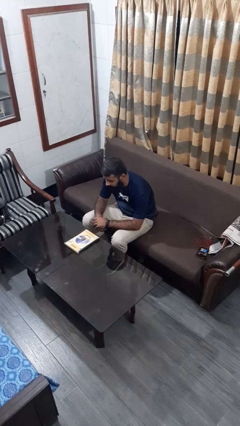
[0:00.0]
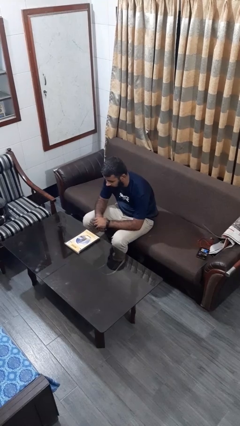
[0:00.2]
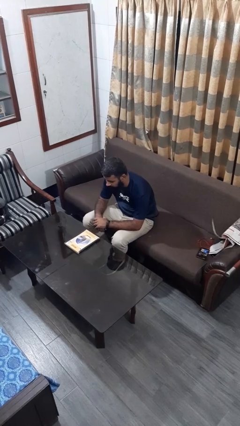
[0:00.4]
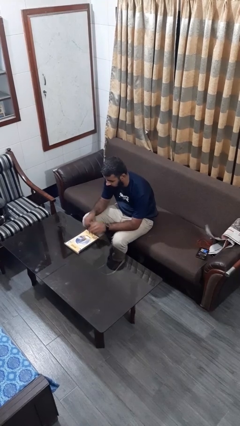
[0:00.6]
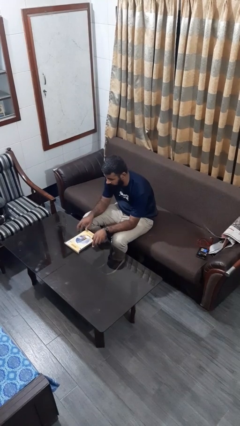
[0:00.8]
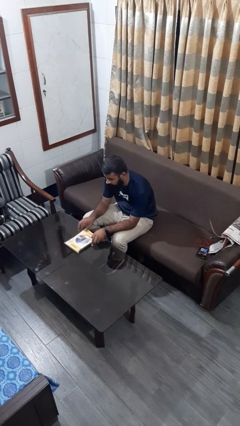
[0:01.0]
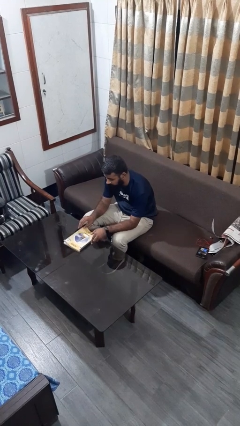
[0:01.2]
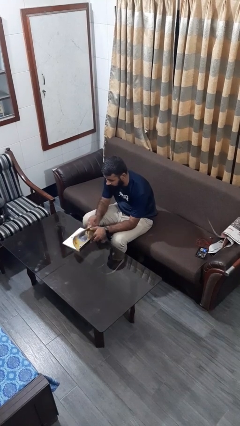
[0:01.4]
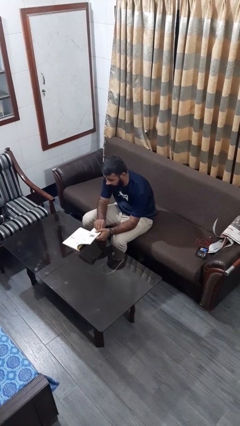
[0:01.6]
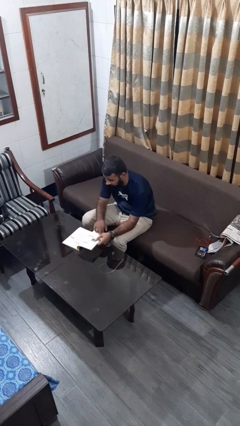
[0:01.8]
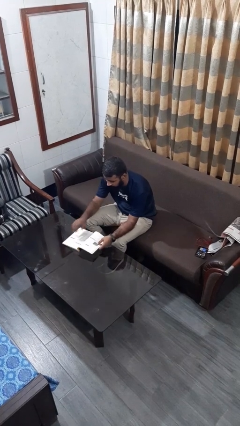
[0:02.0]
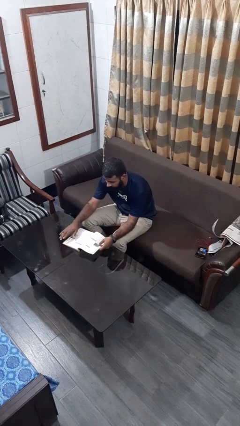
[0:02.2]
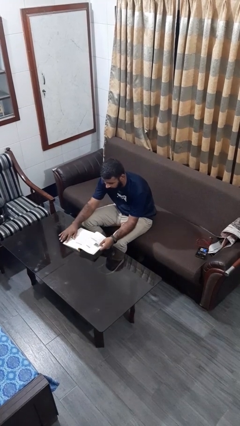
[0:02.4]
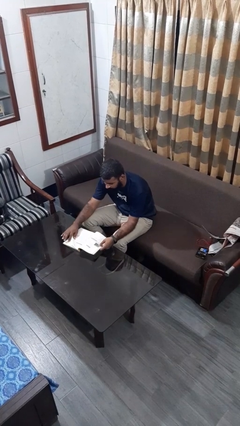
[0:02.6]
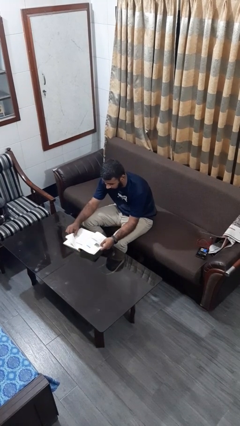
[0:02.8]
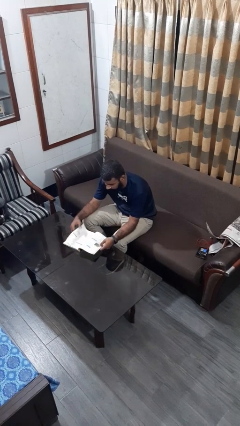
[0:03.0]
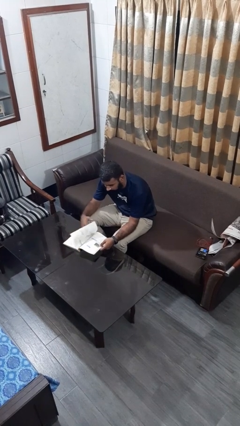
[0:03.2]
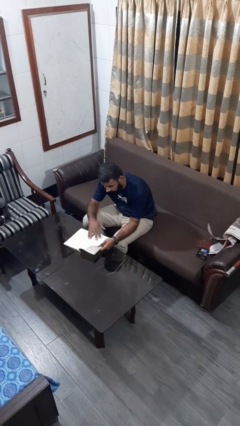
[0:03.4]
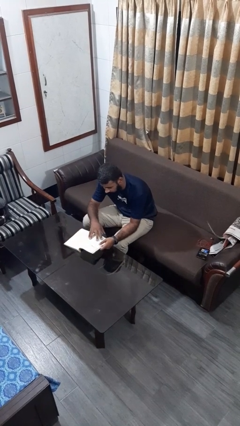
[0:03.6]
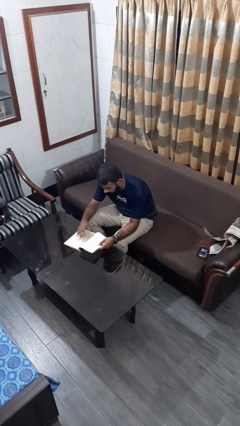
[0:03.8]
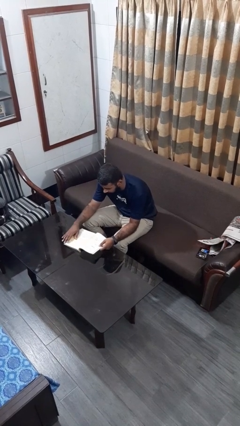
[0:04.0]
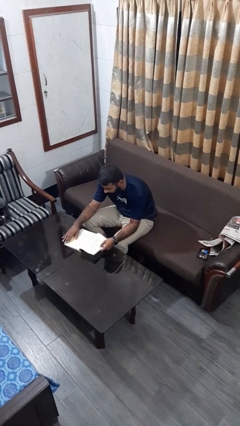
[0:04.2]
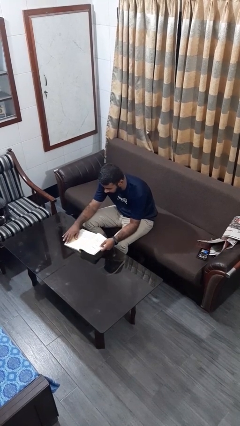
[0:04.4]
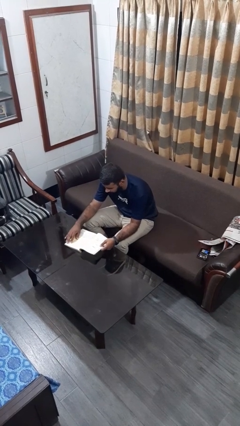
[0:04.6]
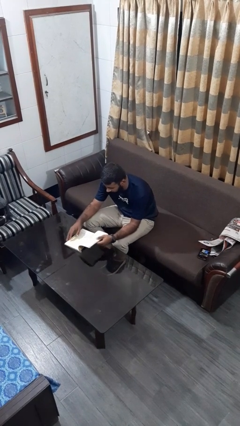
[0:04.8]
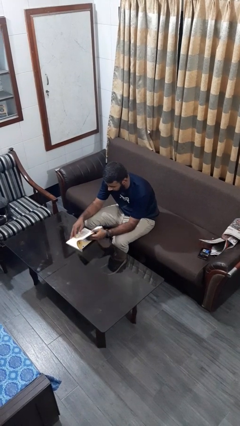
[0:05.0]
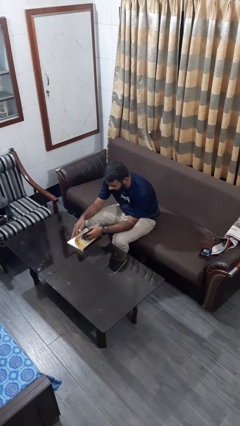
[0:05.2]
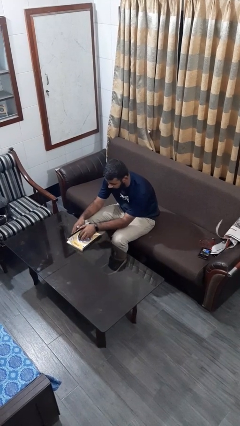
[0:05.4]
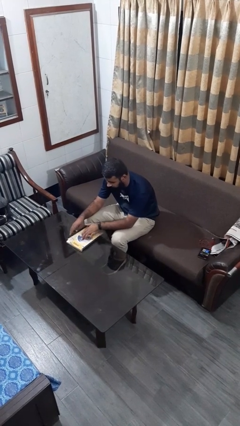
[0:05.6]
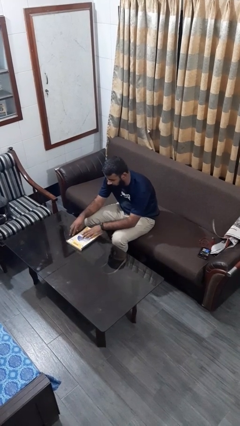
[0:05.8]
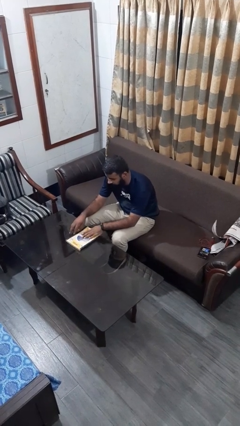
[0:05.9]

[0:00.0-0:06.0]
person reads book

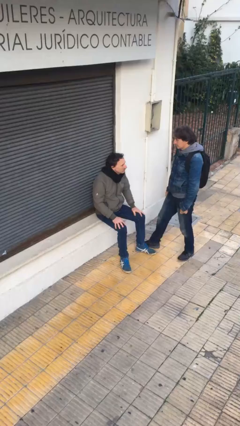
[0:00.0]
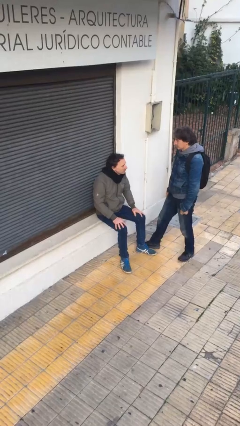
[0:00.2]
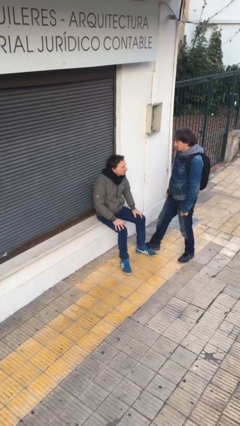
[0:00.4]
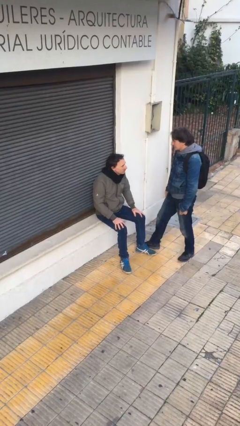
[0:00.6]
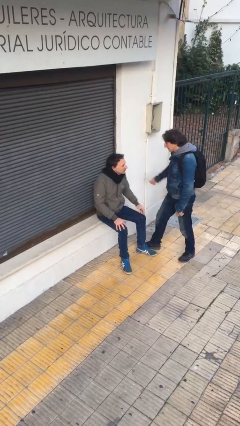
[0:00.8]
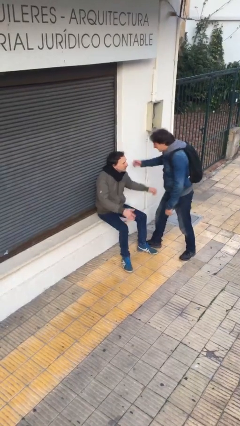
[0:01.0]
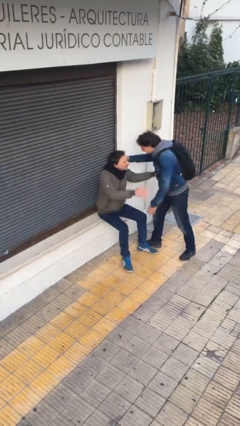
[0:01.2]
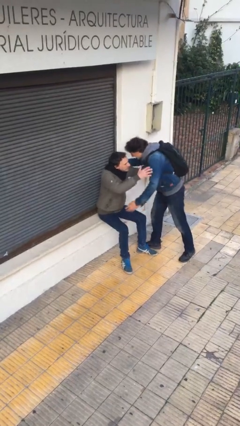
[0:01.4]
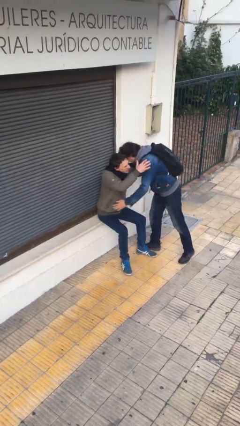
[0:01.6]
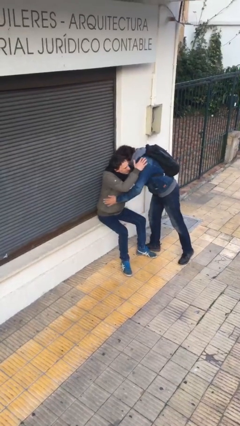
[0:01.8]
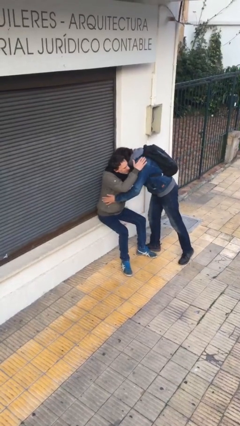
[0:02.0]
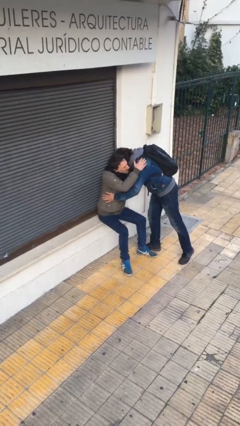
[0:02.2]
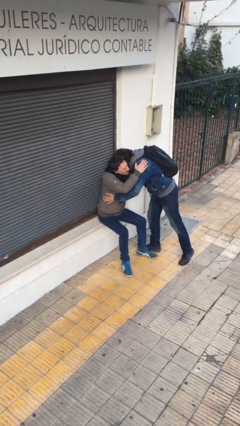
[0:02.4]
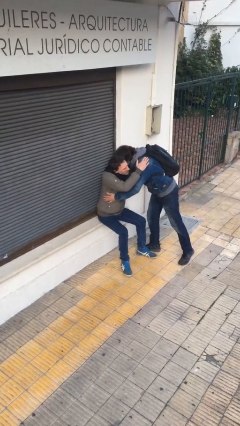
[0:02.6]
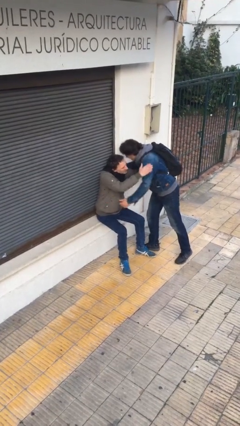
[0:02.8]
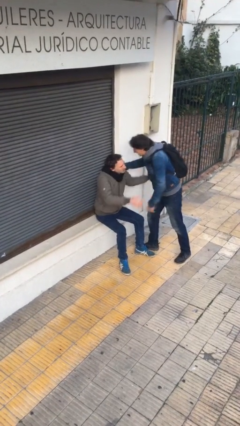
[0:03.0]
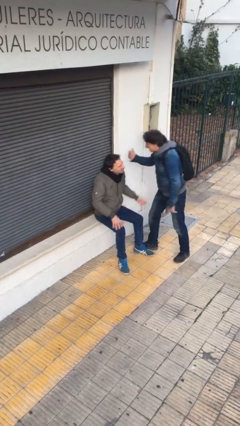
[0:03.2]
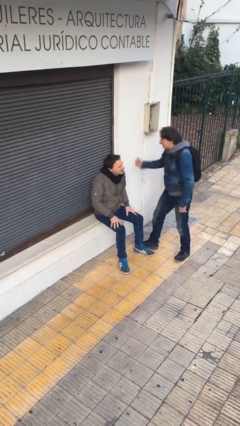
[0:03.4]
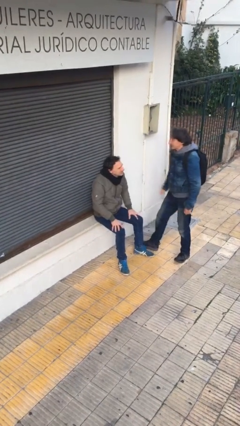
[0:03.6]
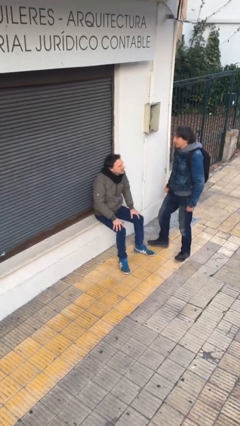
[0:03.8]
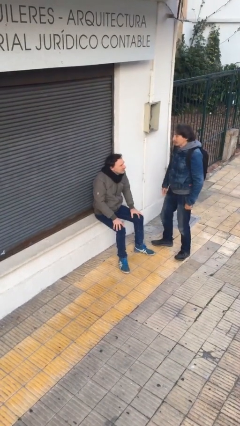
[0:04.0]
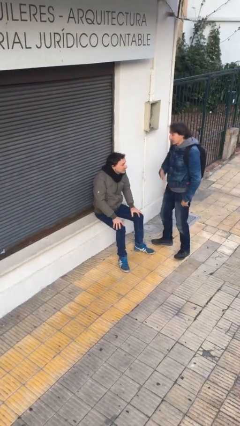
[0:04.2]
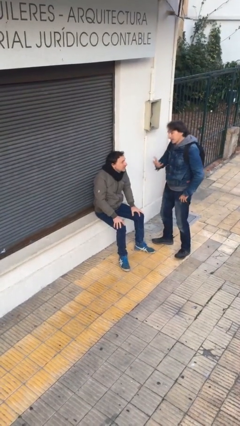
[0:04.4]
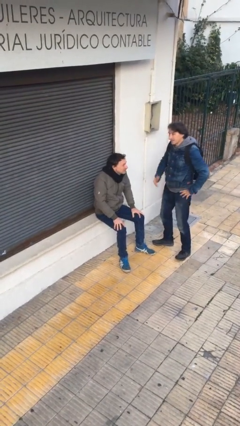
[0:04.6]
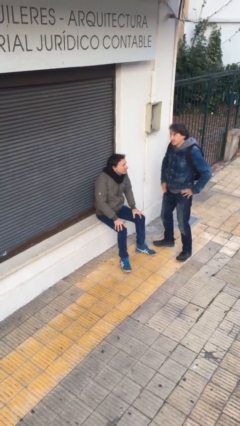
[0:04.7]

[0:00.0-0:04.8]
person embraces person

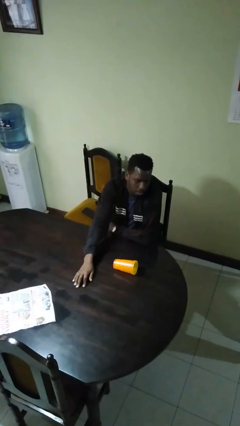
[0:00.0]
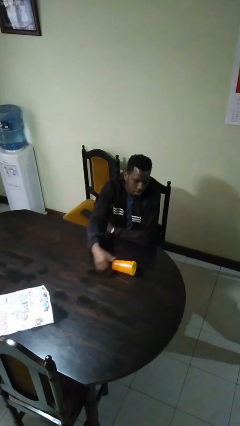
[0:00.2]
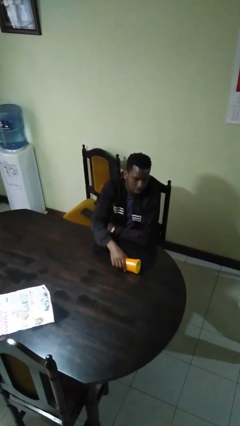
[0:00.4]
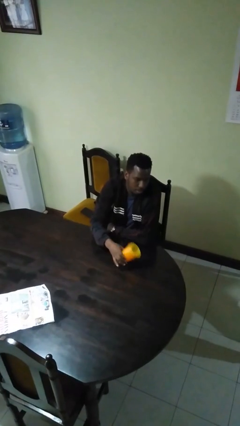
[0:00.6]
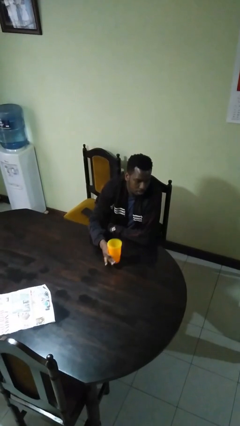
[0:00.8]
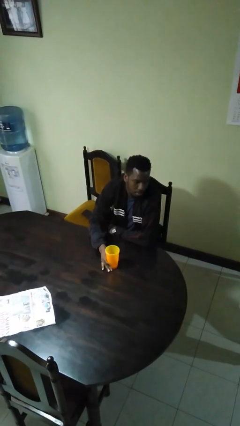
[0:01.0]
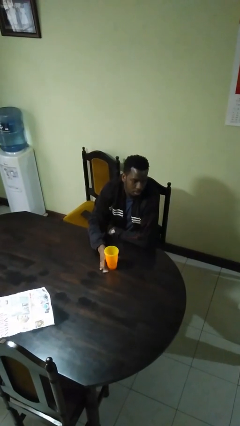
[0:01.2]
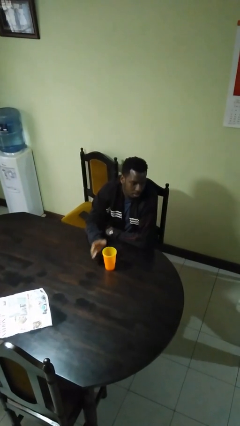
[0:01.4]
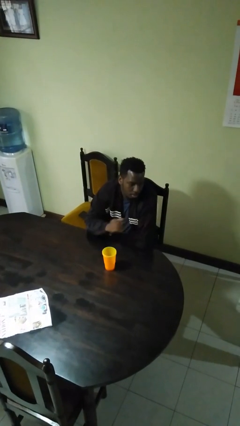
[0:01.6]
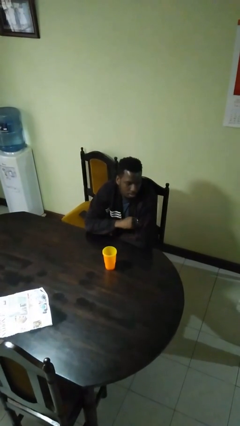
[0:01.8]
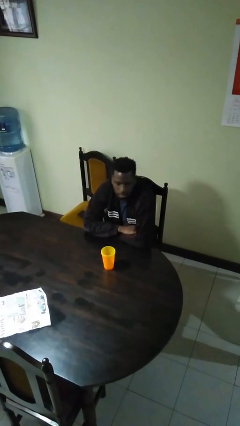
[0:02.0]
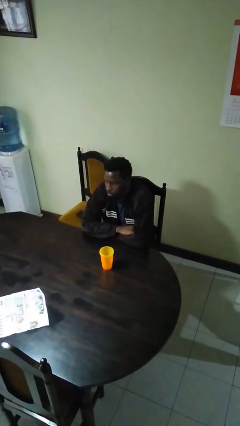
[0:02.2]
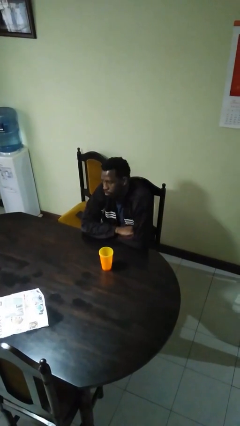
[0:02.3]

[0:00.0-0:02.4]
person sets upright glass

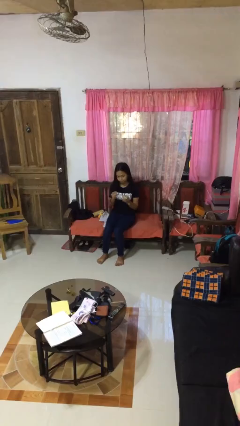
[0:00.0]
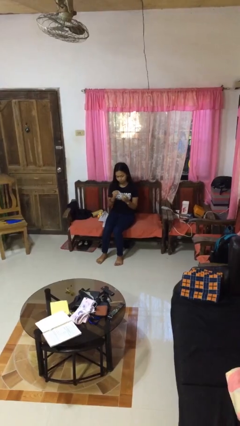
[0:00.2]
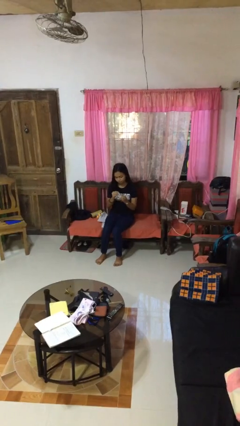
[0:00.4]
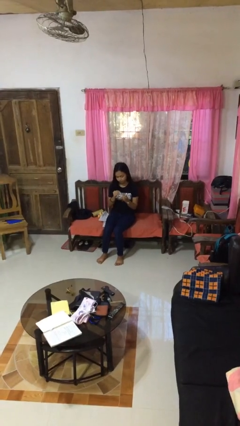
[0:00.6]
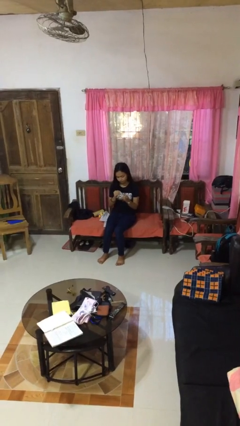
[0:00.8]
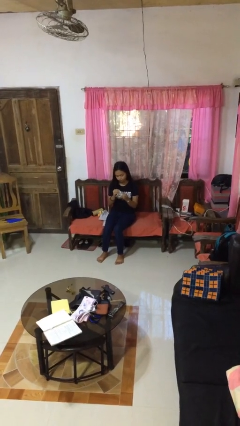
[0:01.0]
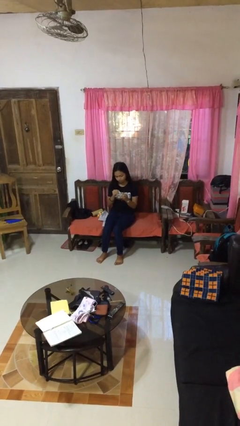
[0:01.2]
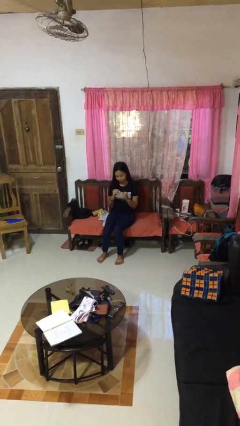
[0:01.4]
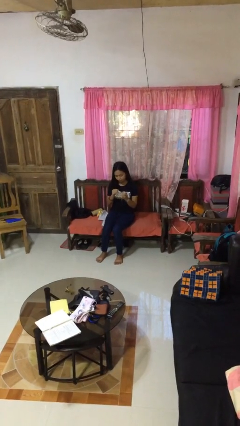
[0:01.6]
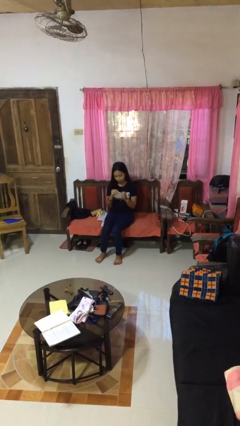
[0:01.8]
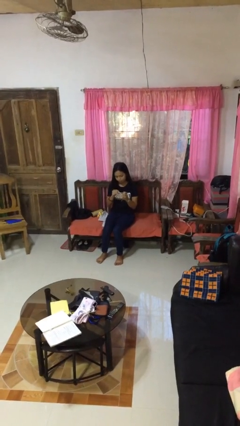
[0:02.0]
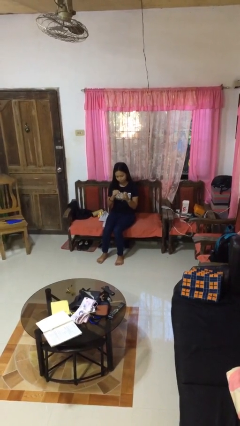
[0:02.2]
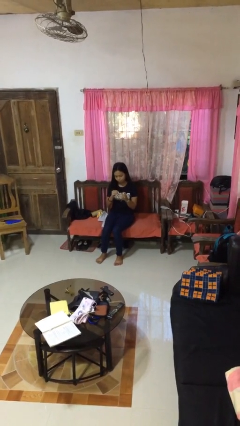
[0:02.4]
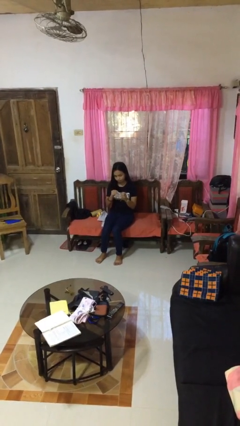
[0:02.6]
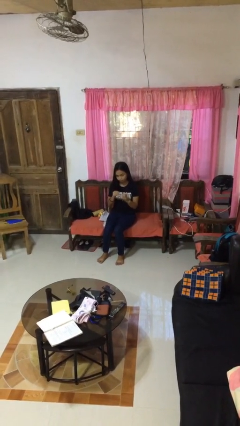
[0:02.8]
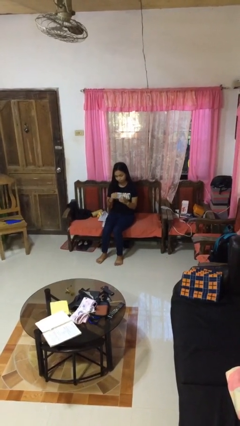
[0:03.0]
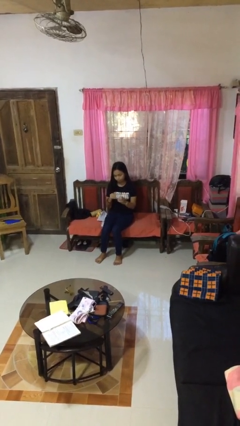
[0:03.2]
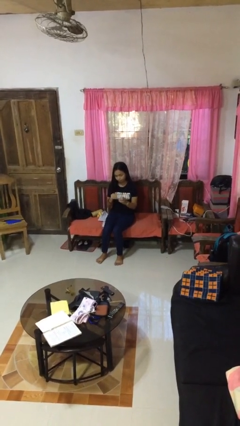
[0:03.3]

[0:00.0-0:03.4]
person clips fingernails

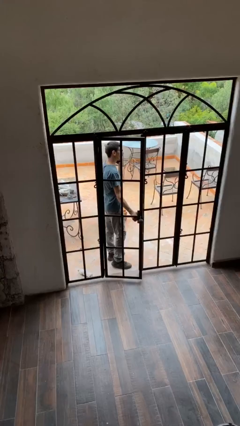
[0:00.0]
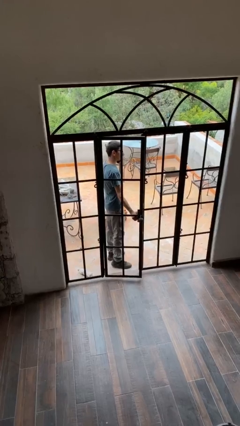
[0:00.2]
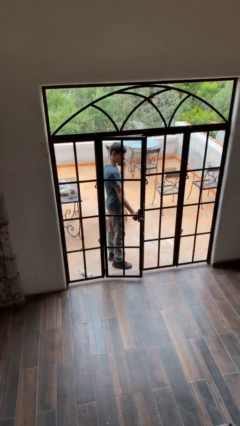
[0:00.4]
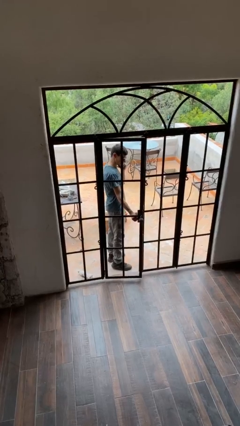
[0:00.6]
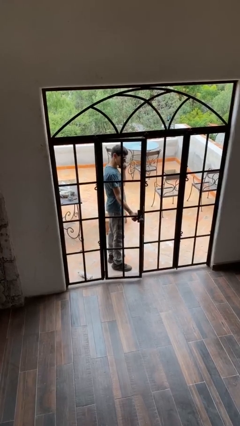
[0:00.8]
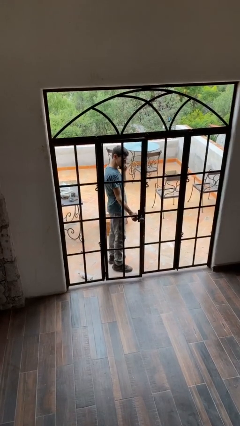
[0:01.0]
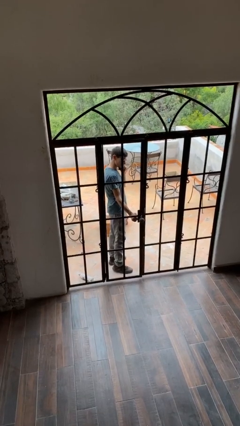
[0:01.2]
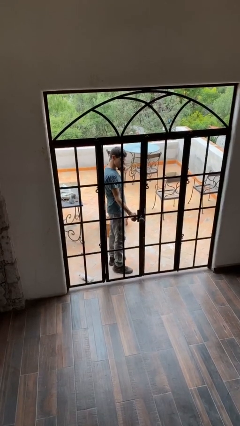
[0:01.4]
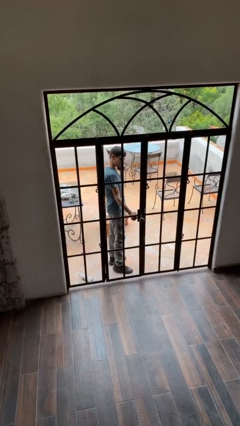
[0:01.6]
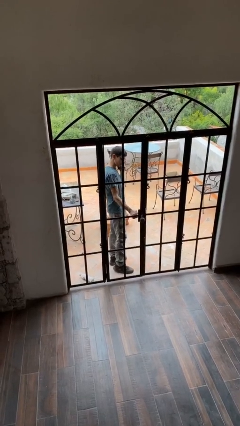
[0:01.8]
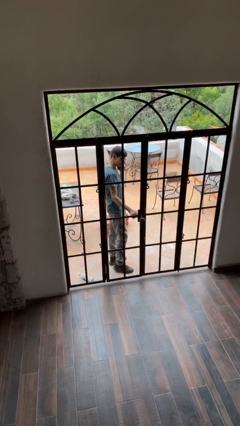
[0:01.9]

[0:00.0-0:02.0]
person closes facility door
